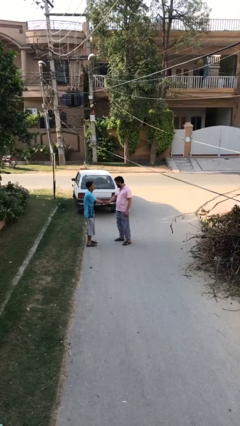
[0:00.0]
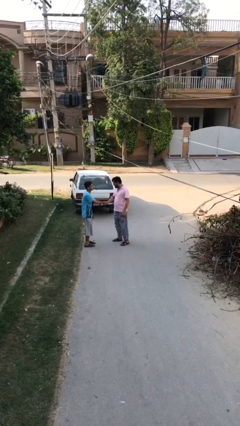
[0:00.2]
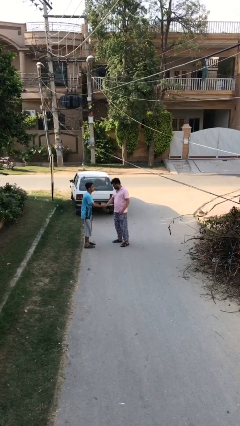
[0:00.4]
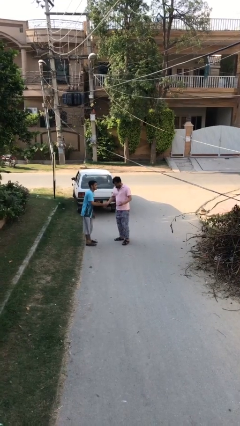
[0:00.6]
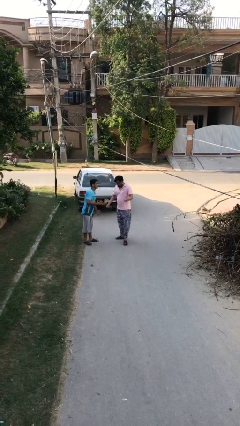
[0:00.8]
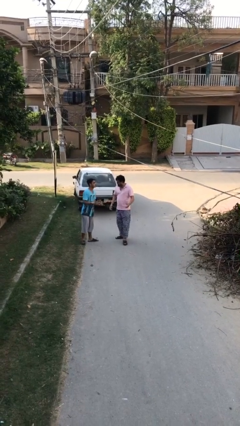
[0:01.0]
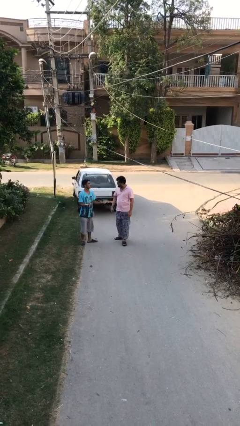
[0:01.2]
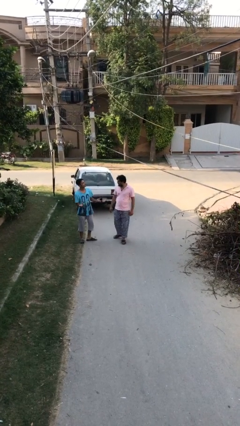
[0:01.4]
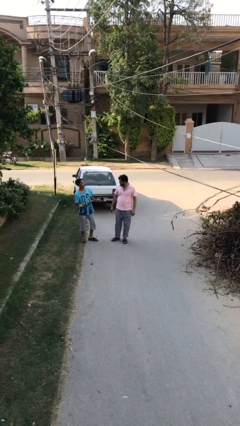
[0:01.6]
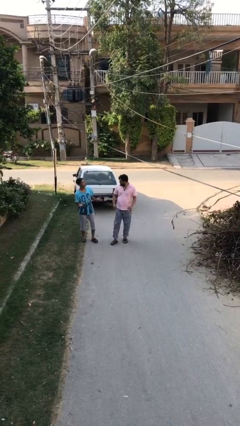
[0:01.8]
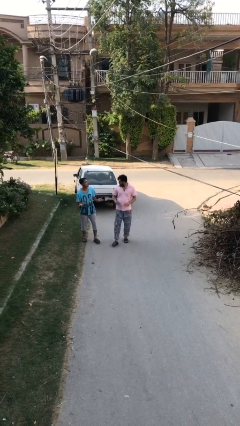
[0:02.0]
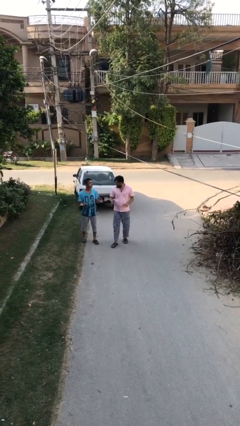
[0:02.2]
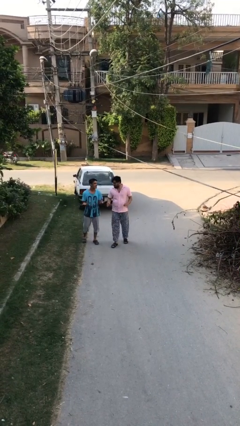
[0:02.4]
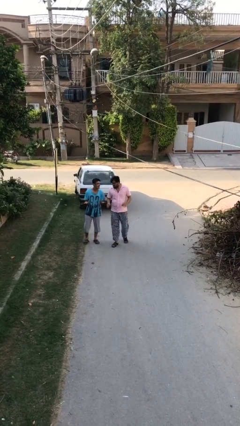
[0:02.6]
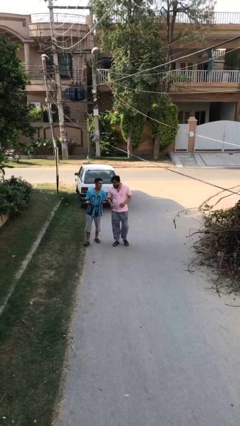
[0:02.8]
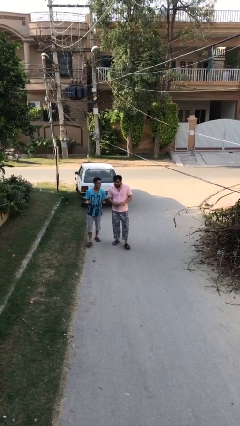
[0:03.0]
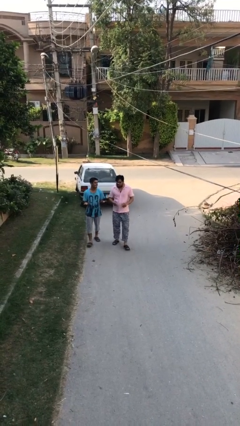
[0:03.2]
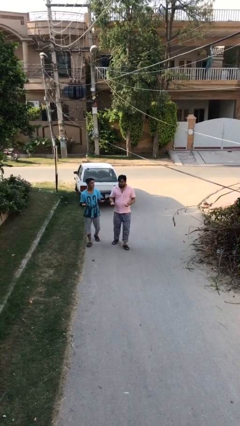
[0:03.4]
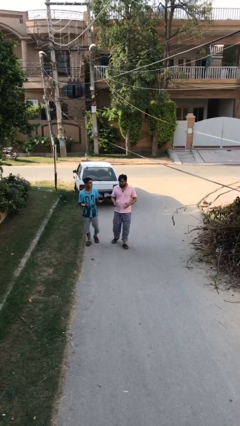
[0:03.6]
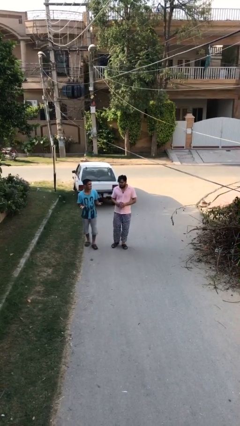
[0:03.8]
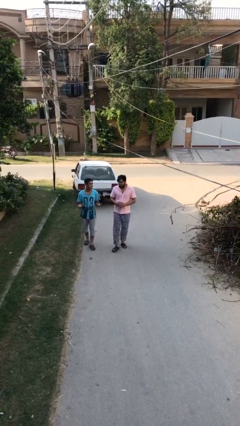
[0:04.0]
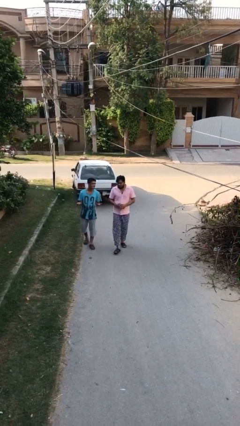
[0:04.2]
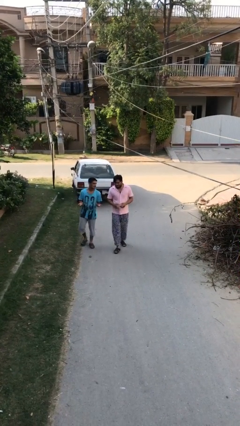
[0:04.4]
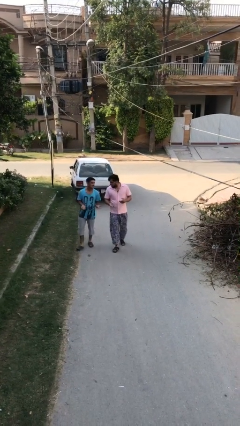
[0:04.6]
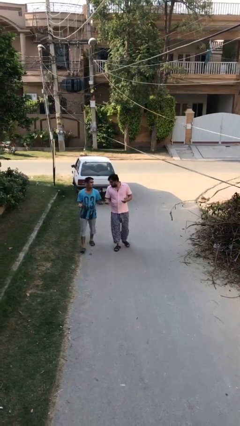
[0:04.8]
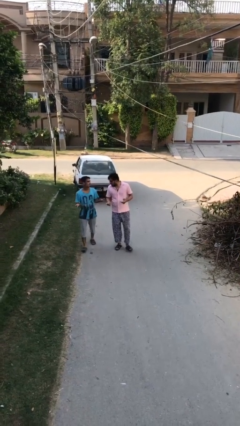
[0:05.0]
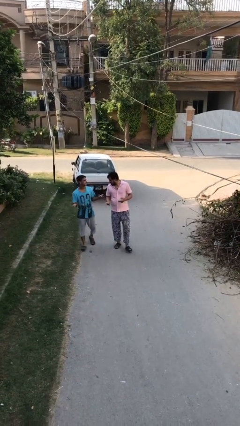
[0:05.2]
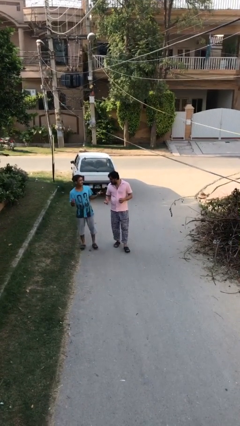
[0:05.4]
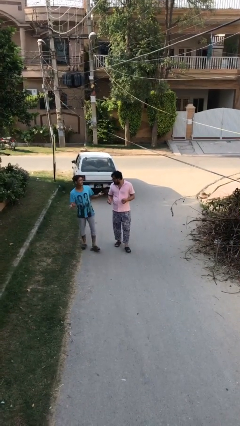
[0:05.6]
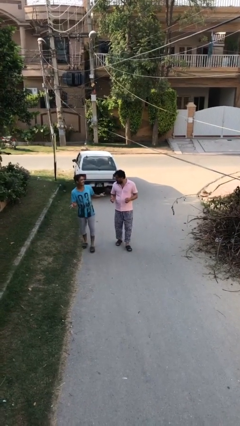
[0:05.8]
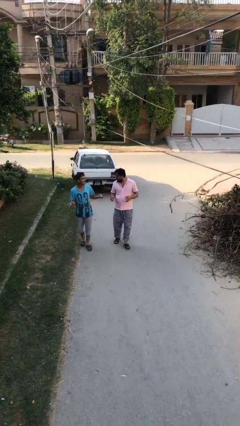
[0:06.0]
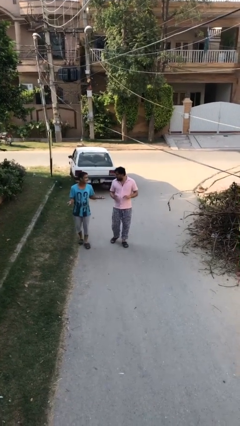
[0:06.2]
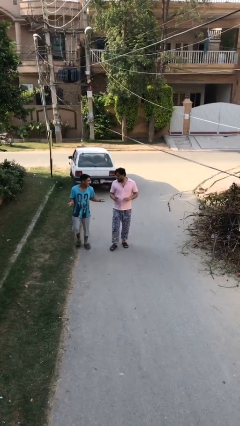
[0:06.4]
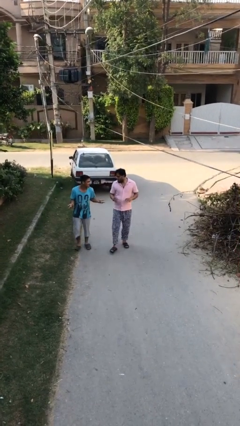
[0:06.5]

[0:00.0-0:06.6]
person talks to person

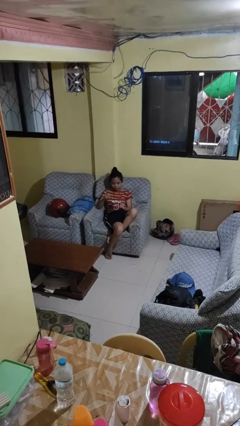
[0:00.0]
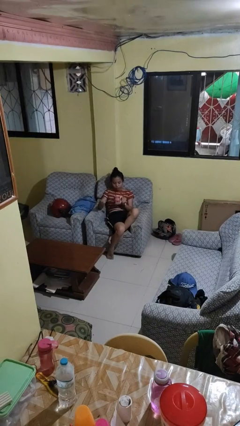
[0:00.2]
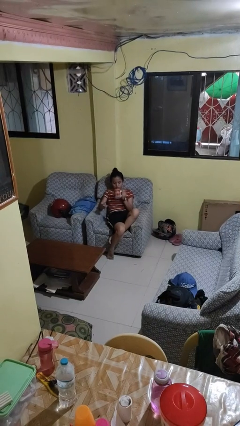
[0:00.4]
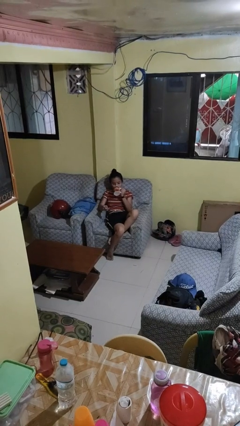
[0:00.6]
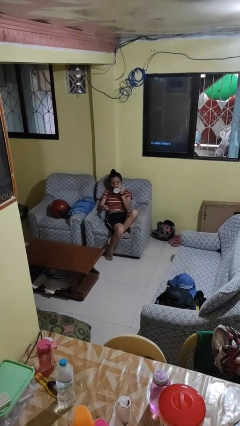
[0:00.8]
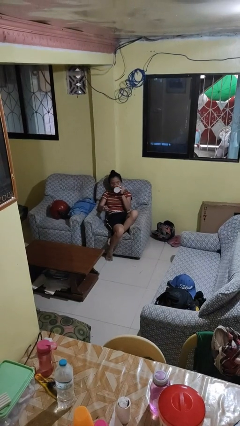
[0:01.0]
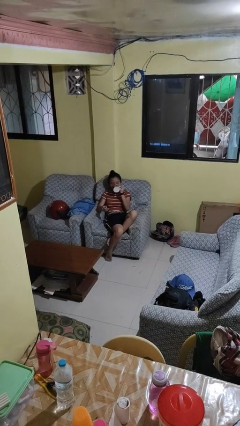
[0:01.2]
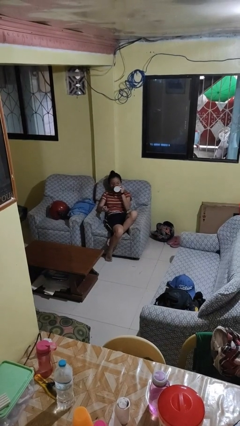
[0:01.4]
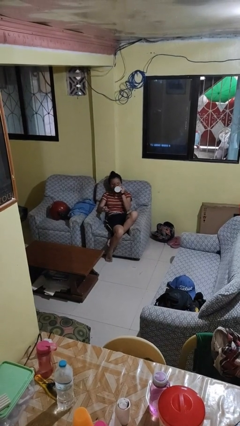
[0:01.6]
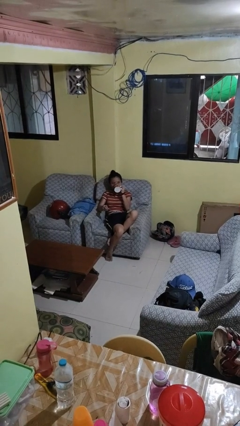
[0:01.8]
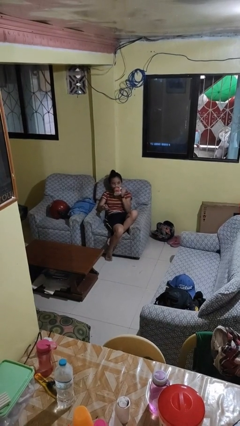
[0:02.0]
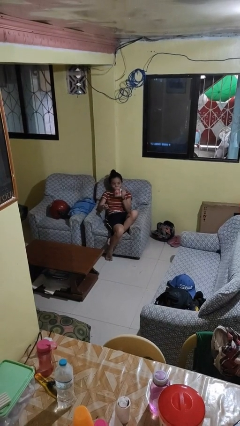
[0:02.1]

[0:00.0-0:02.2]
person drinks from mug

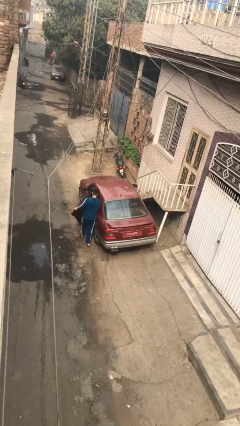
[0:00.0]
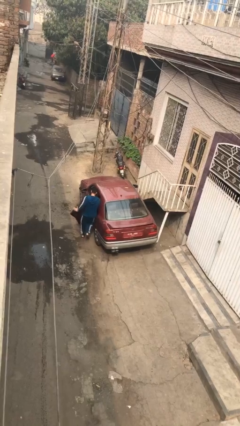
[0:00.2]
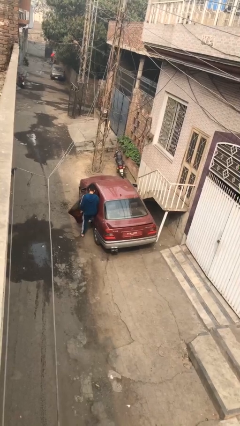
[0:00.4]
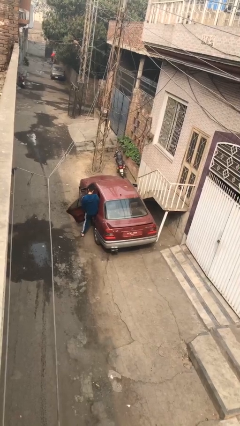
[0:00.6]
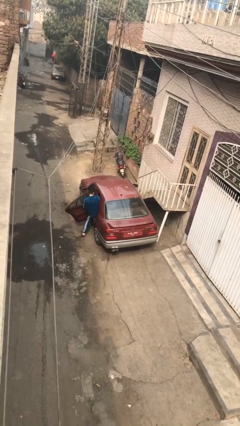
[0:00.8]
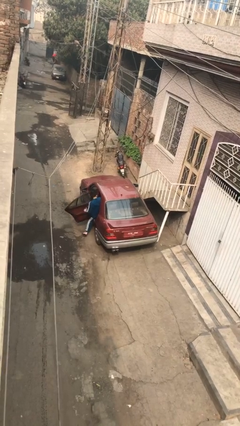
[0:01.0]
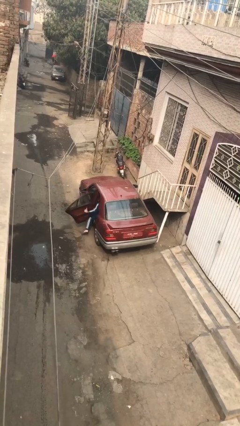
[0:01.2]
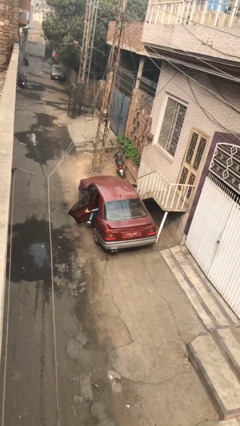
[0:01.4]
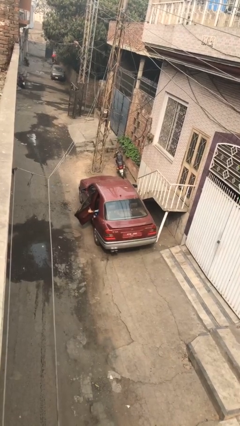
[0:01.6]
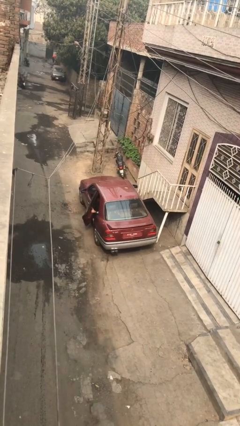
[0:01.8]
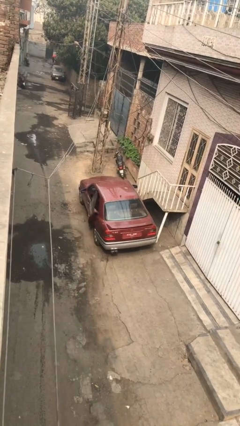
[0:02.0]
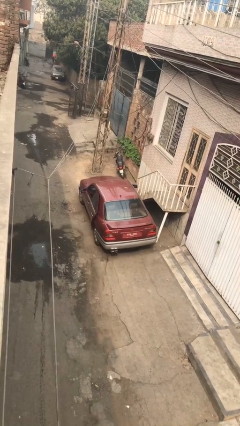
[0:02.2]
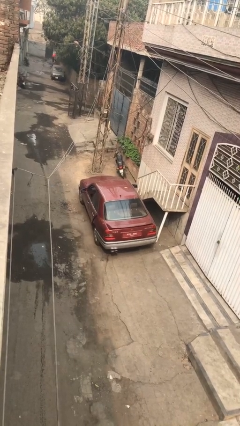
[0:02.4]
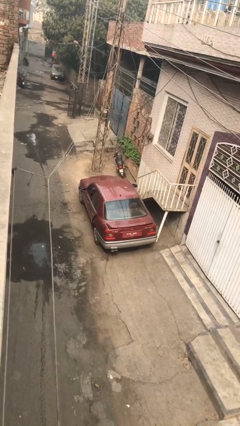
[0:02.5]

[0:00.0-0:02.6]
car picks up person

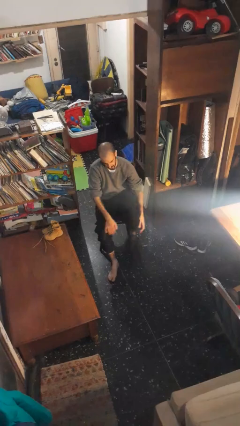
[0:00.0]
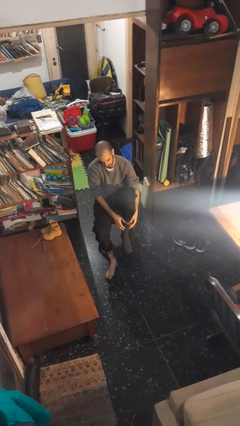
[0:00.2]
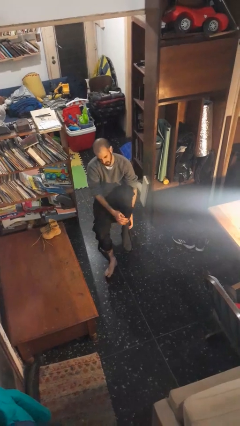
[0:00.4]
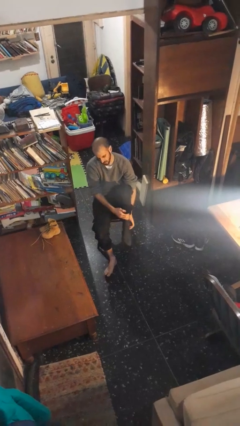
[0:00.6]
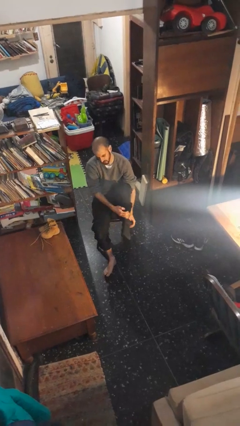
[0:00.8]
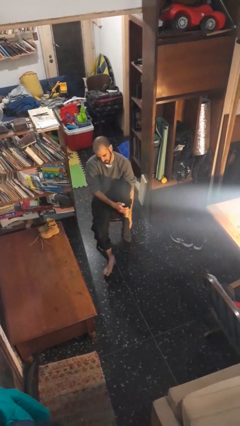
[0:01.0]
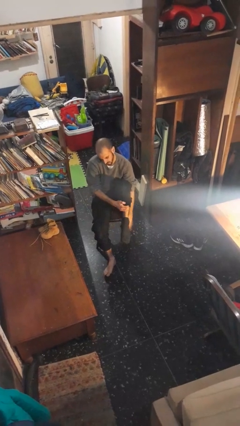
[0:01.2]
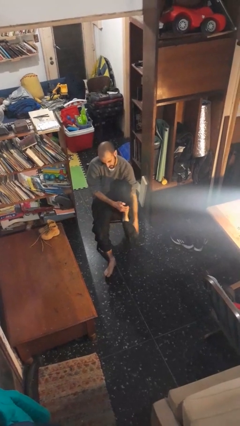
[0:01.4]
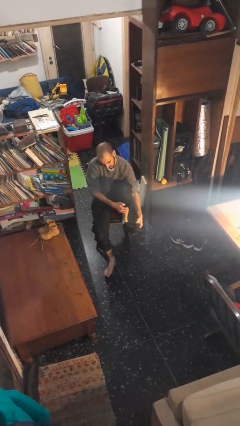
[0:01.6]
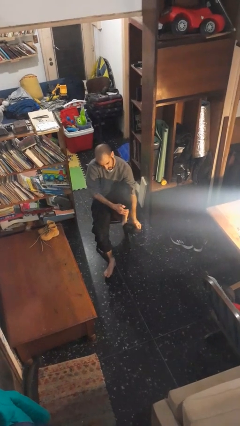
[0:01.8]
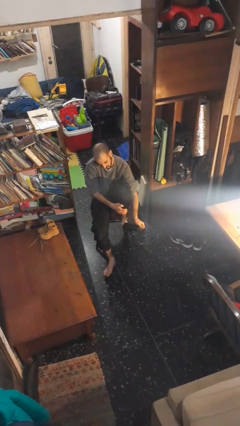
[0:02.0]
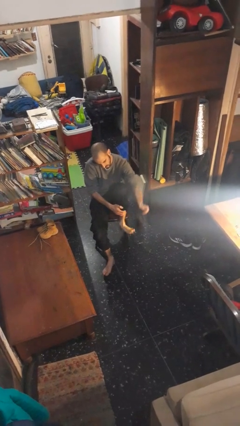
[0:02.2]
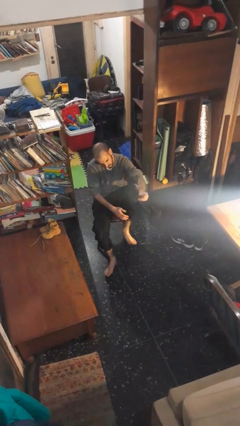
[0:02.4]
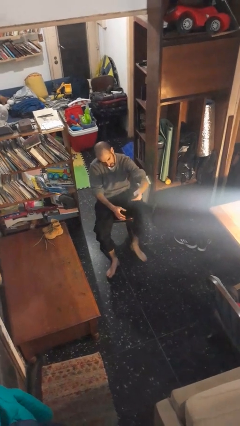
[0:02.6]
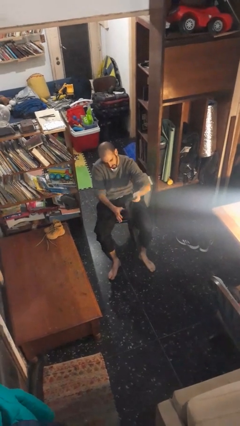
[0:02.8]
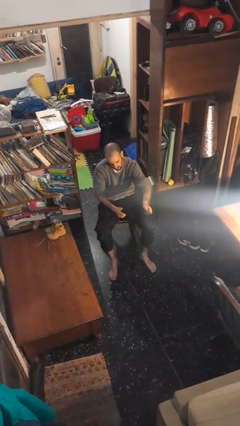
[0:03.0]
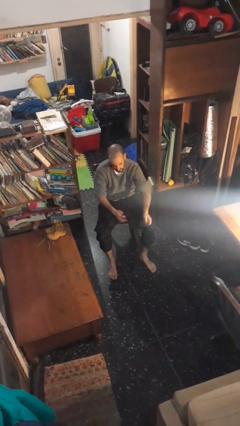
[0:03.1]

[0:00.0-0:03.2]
person takes off socks

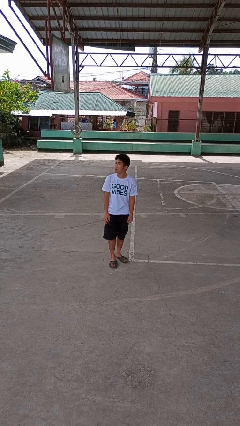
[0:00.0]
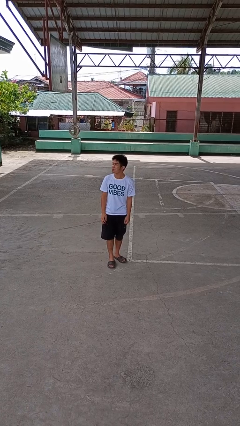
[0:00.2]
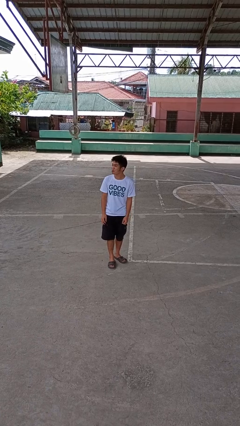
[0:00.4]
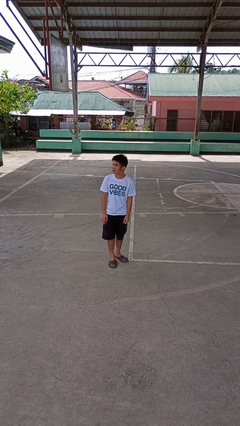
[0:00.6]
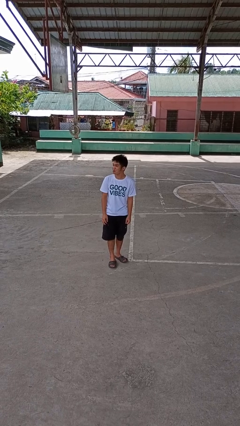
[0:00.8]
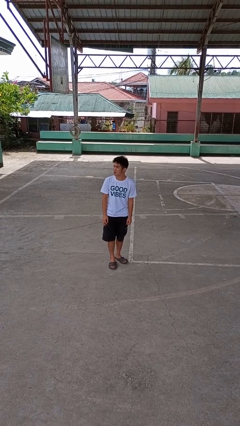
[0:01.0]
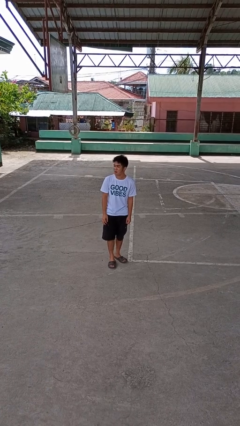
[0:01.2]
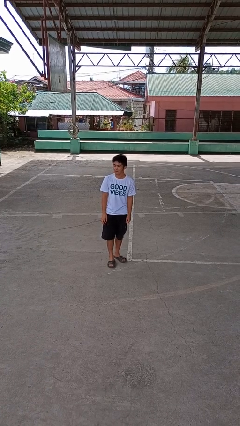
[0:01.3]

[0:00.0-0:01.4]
person sticks out tongue

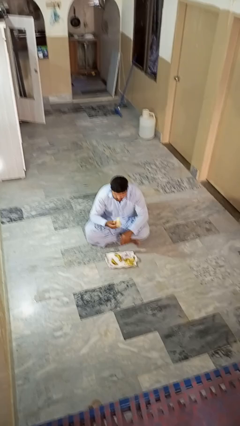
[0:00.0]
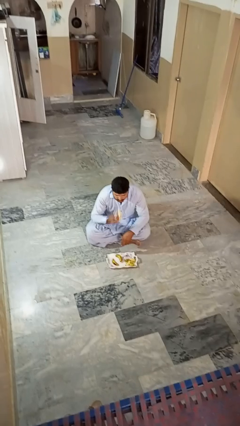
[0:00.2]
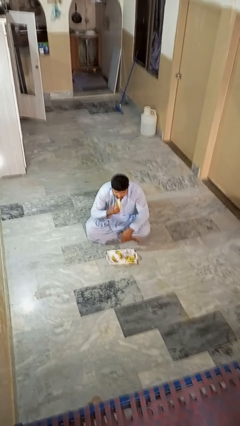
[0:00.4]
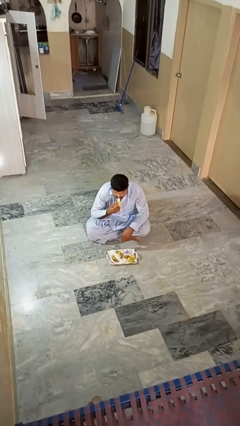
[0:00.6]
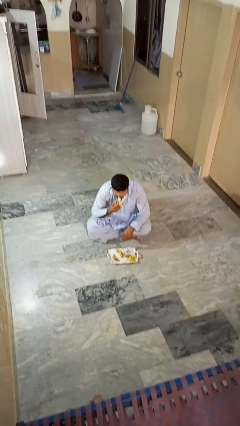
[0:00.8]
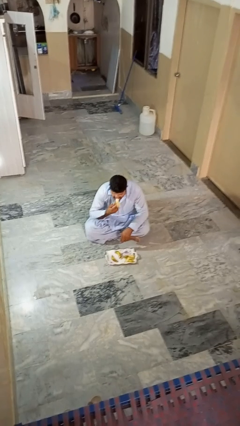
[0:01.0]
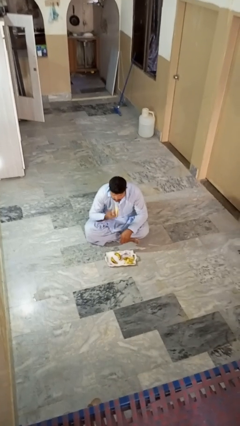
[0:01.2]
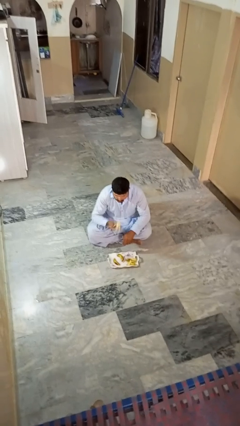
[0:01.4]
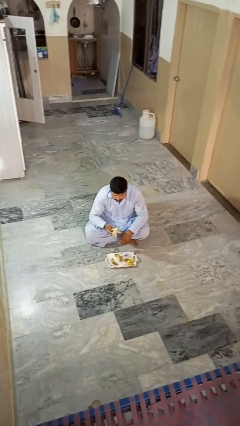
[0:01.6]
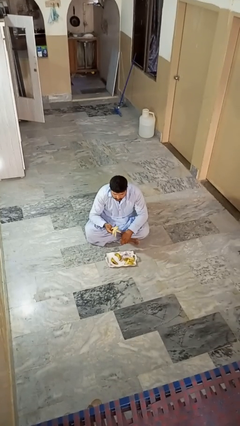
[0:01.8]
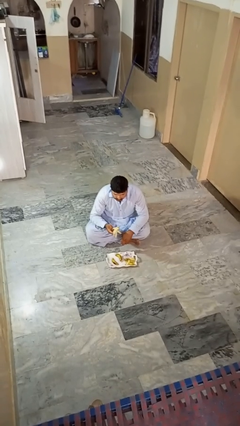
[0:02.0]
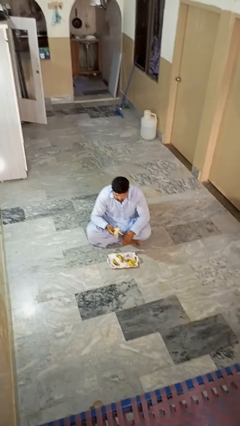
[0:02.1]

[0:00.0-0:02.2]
person eats banana
